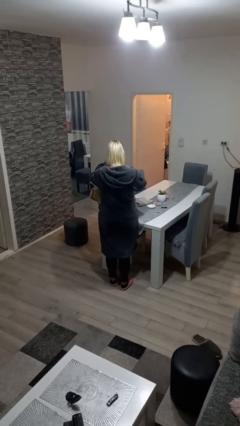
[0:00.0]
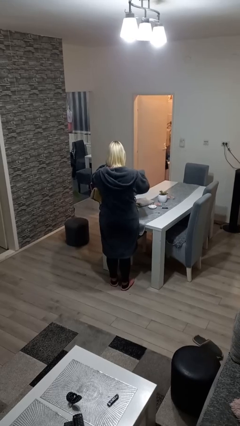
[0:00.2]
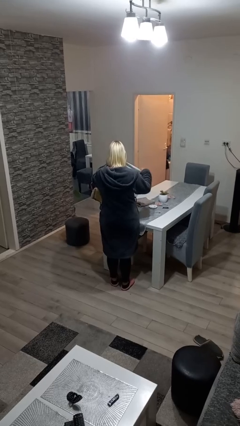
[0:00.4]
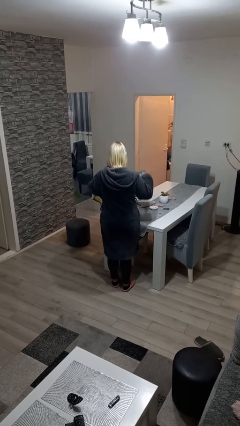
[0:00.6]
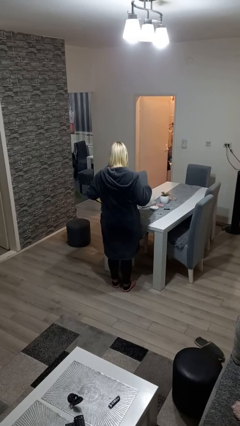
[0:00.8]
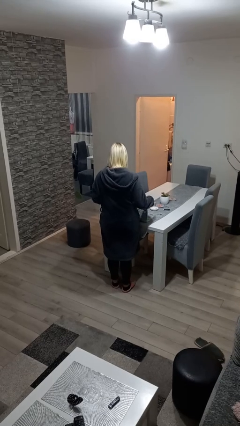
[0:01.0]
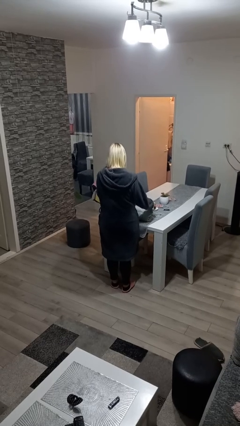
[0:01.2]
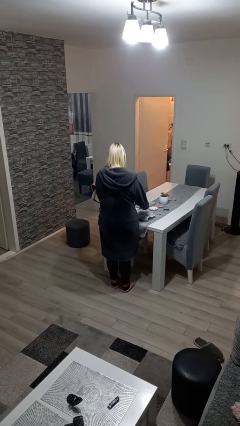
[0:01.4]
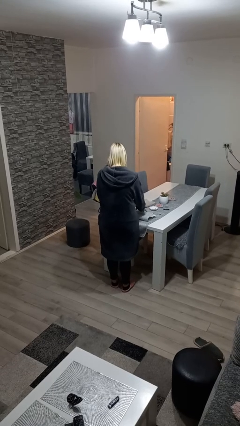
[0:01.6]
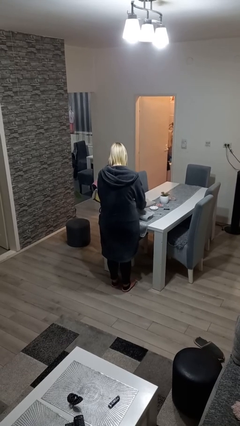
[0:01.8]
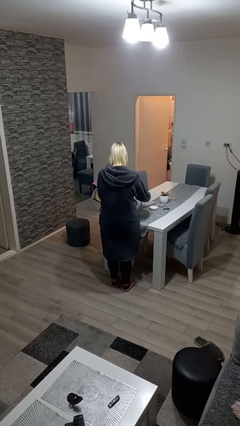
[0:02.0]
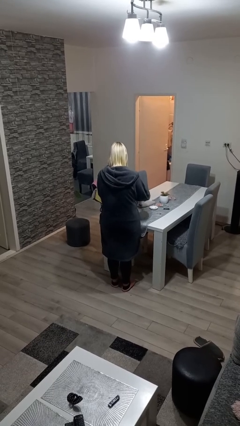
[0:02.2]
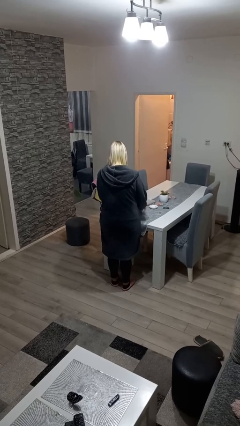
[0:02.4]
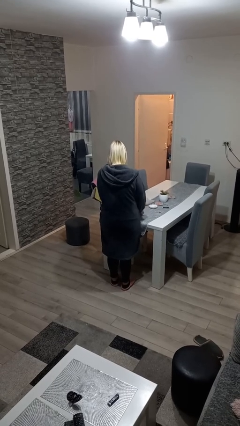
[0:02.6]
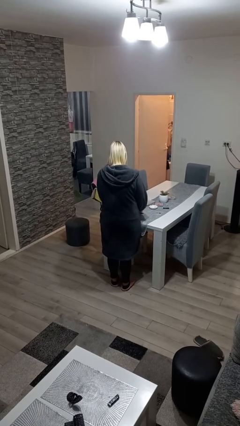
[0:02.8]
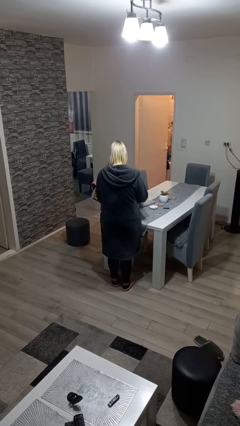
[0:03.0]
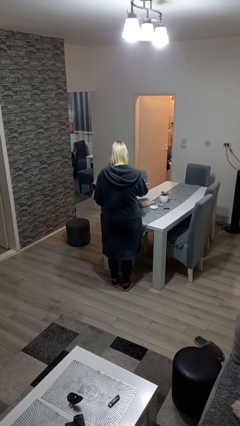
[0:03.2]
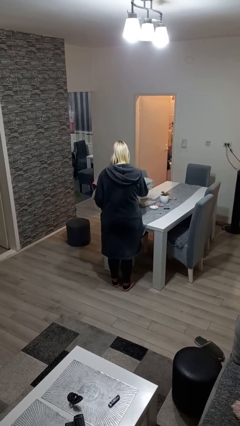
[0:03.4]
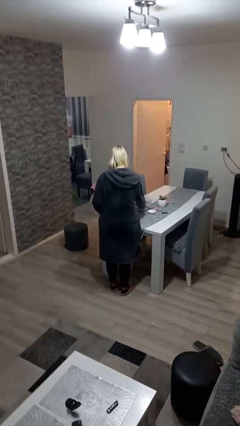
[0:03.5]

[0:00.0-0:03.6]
person folds towel

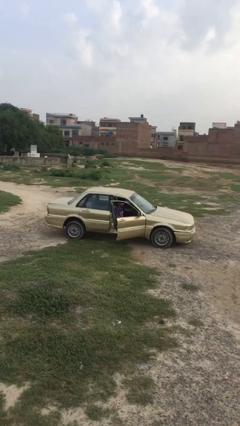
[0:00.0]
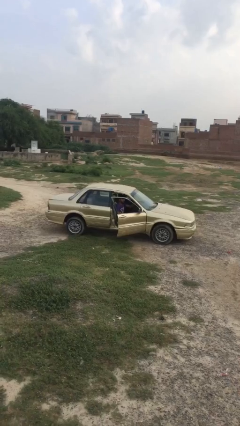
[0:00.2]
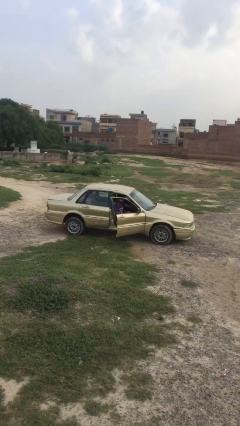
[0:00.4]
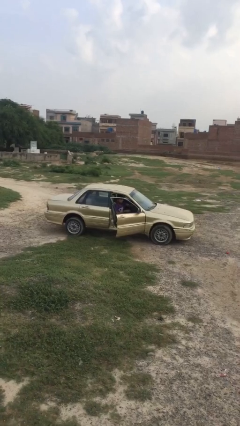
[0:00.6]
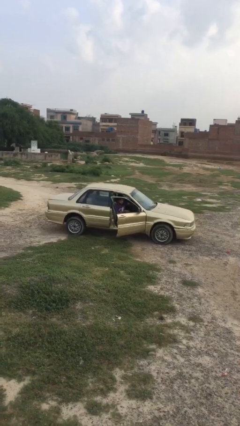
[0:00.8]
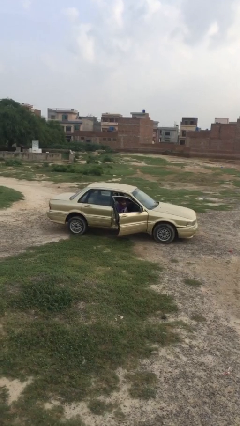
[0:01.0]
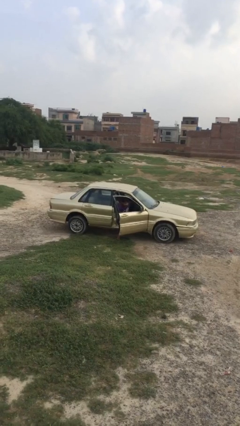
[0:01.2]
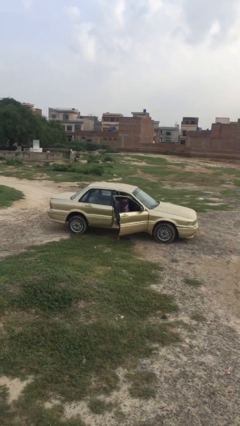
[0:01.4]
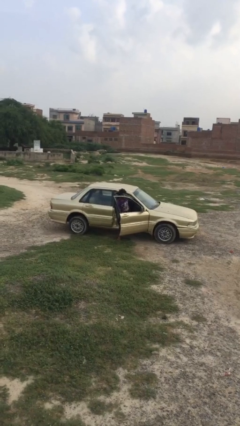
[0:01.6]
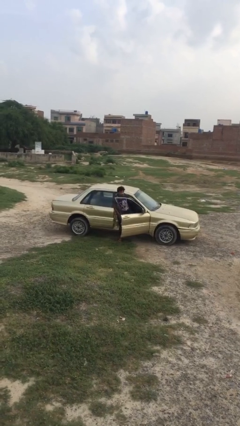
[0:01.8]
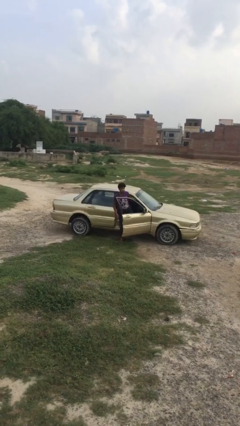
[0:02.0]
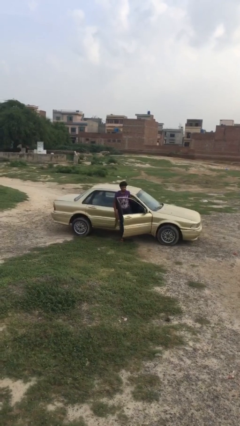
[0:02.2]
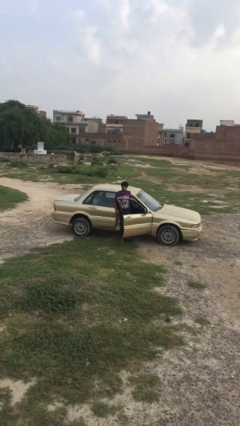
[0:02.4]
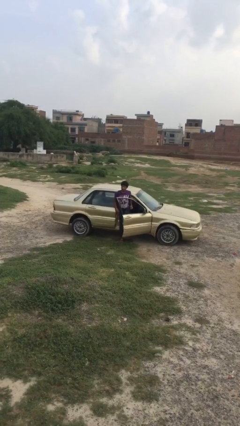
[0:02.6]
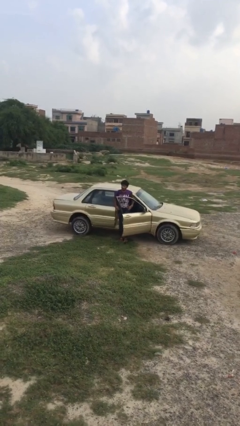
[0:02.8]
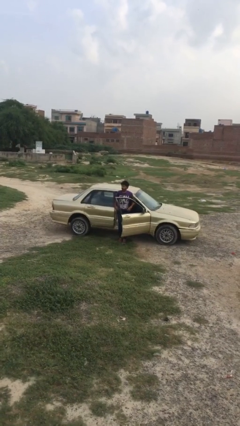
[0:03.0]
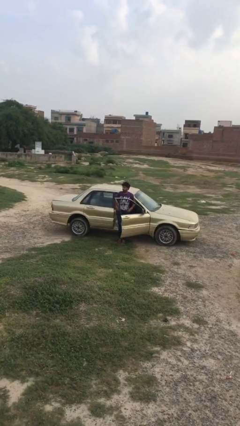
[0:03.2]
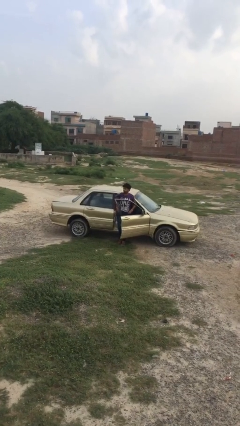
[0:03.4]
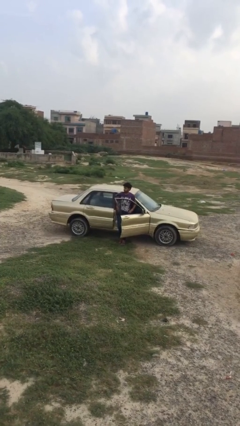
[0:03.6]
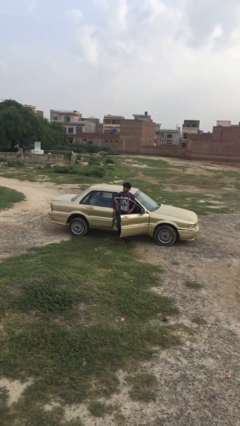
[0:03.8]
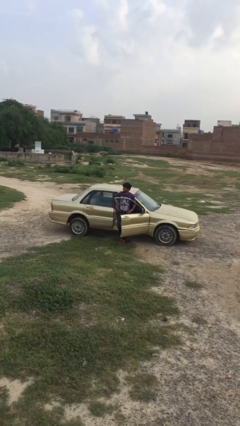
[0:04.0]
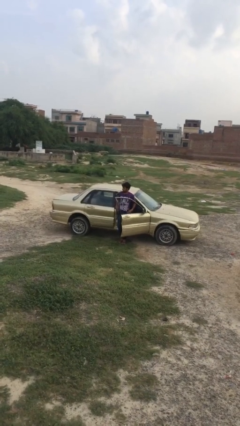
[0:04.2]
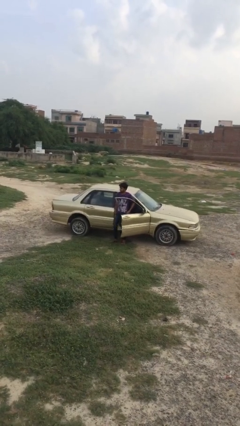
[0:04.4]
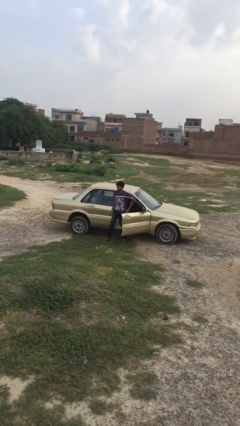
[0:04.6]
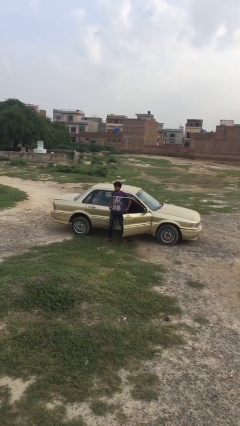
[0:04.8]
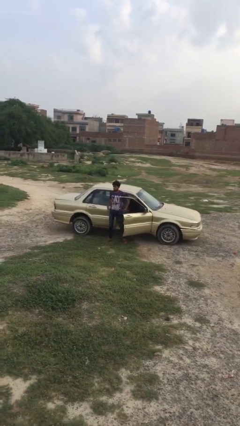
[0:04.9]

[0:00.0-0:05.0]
person exits car

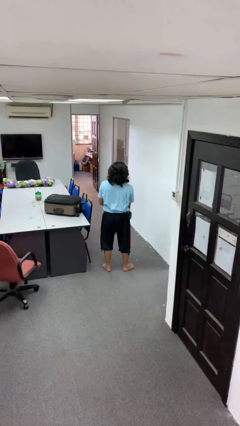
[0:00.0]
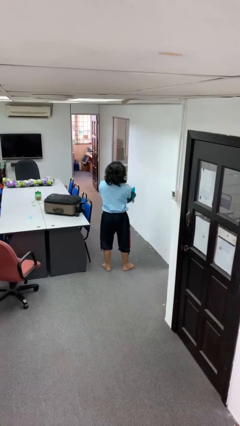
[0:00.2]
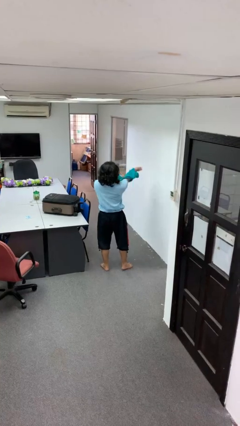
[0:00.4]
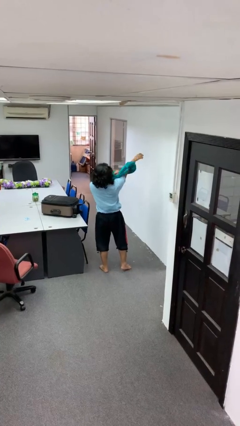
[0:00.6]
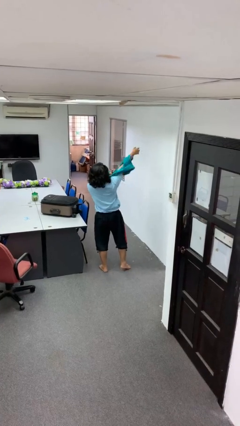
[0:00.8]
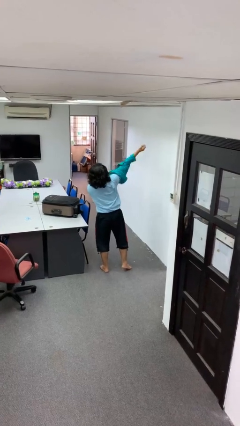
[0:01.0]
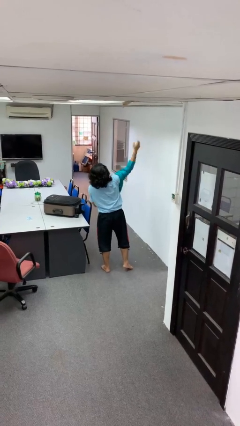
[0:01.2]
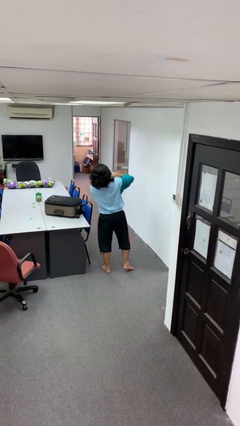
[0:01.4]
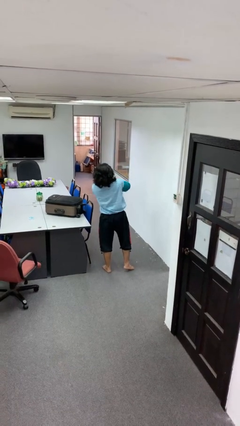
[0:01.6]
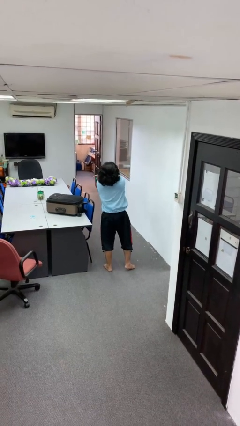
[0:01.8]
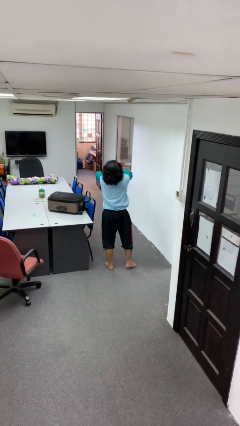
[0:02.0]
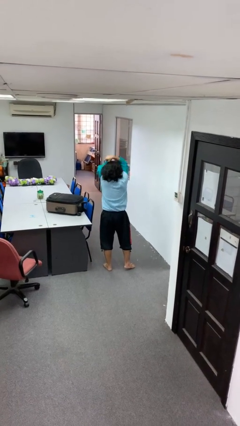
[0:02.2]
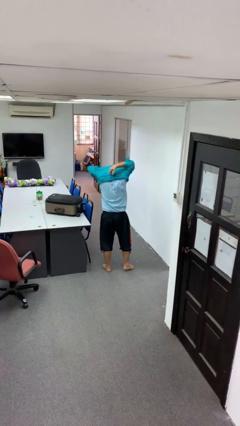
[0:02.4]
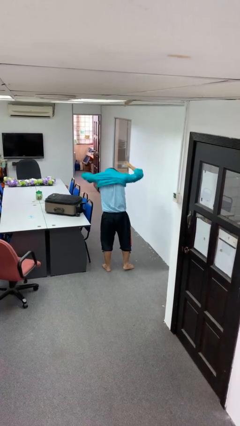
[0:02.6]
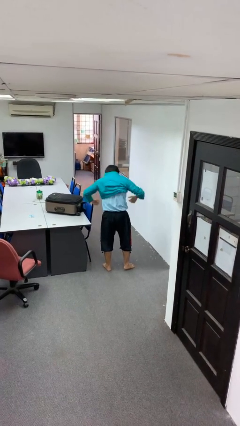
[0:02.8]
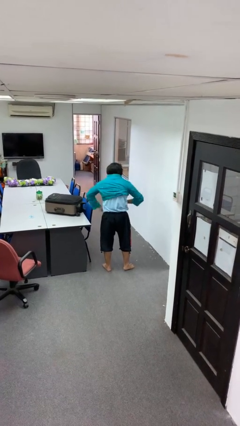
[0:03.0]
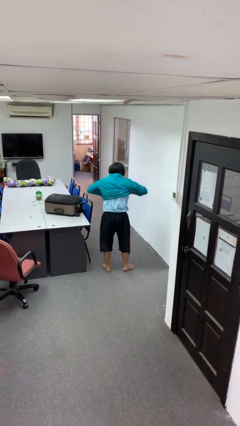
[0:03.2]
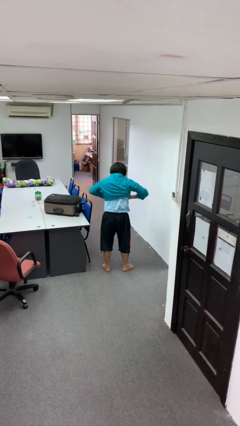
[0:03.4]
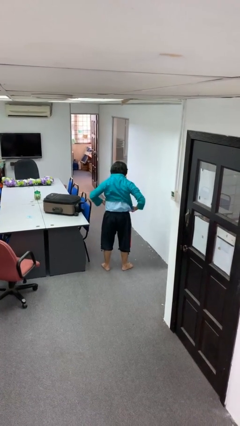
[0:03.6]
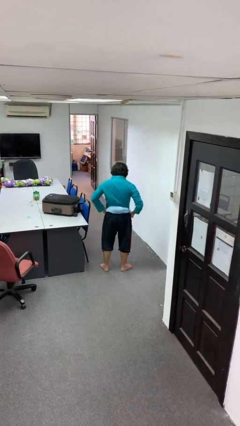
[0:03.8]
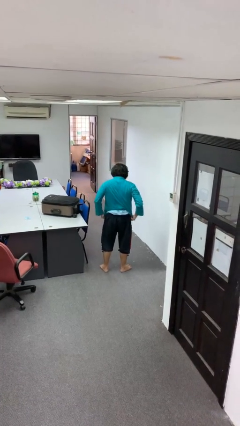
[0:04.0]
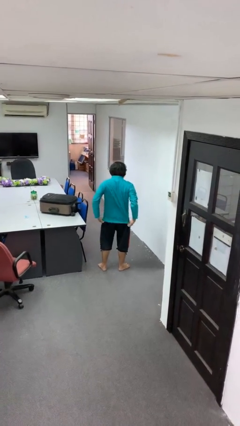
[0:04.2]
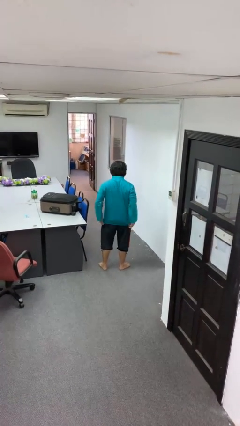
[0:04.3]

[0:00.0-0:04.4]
person puts on shirt

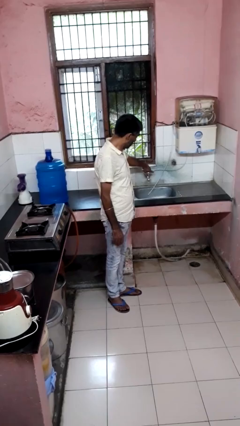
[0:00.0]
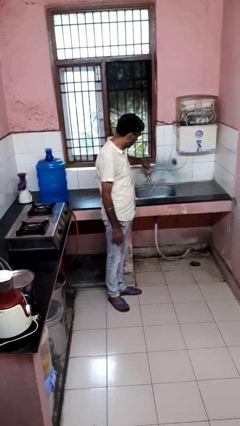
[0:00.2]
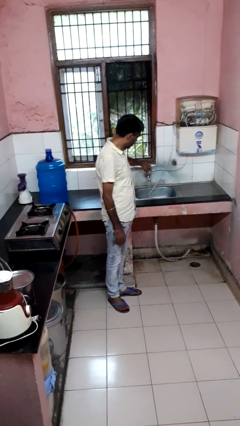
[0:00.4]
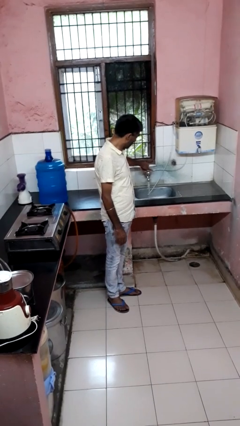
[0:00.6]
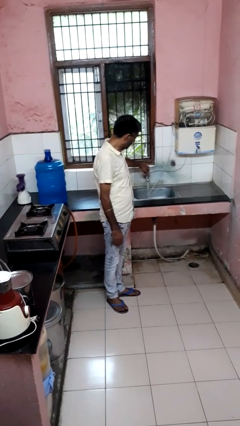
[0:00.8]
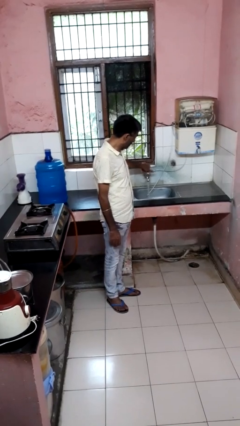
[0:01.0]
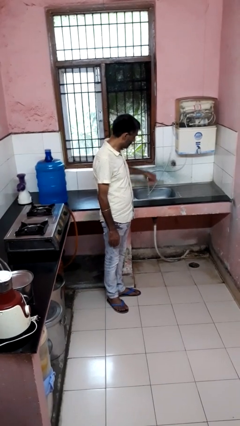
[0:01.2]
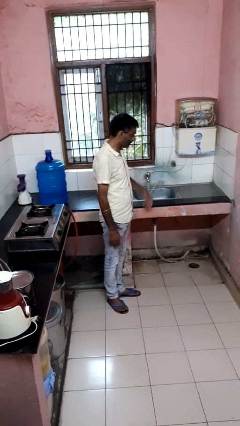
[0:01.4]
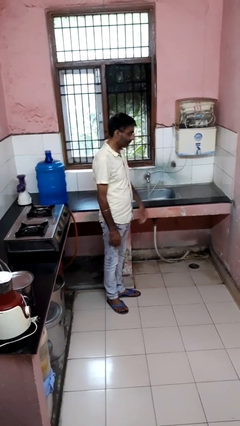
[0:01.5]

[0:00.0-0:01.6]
person turns on faucet

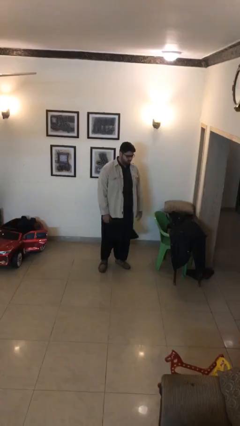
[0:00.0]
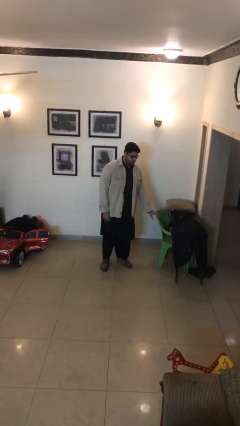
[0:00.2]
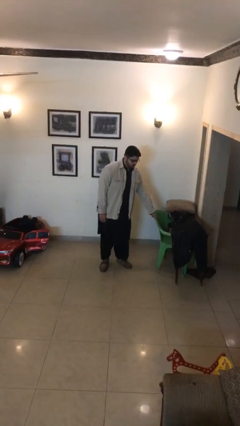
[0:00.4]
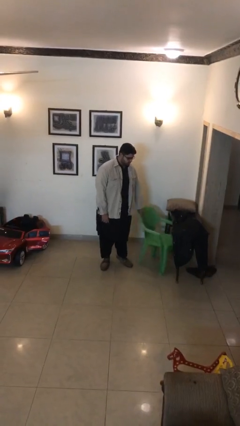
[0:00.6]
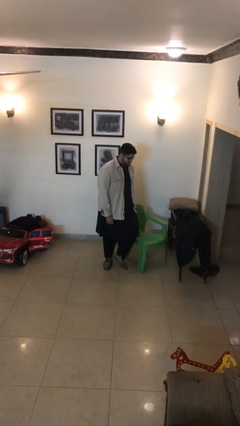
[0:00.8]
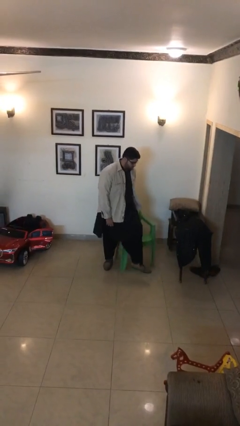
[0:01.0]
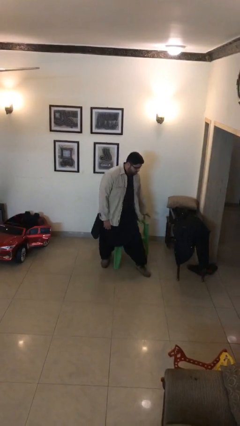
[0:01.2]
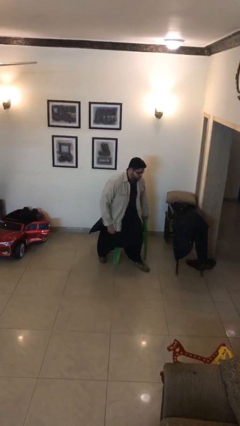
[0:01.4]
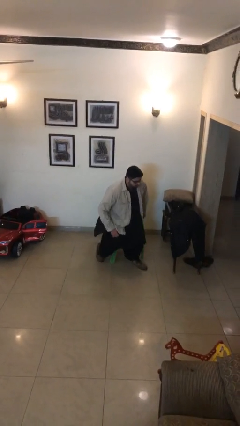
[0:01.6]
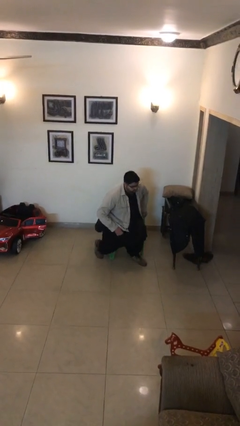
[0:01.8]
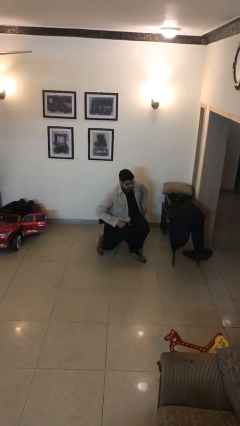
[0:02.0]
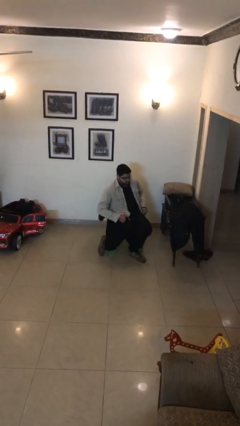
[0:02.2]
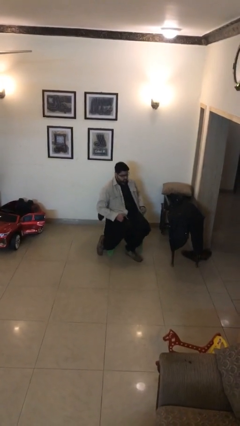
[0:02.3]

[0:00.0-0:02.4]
person sits down

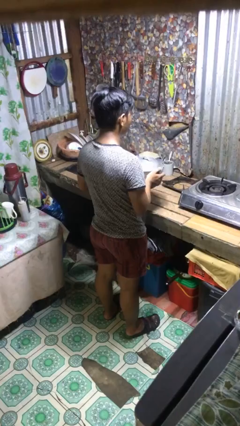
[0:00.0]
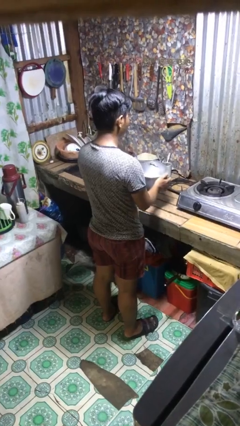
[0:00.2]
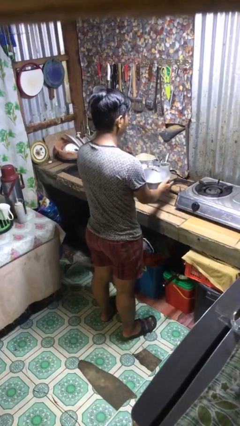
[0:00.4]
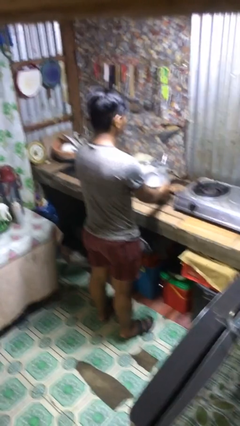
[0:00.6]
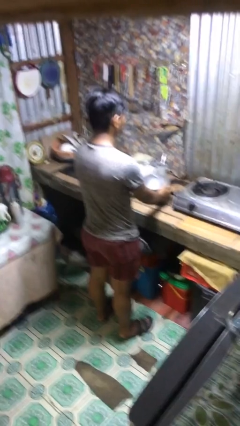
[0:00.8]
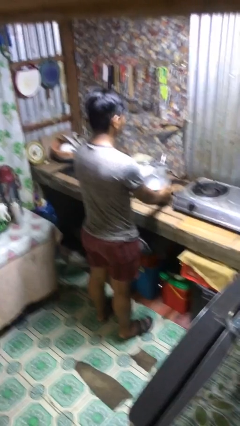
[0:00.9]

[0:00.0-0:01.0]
person puts down object on countertop
